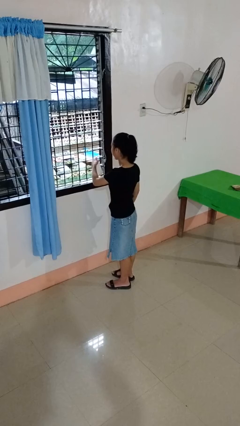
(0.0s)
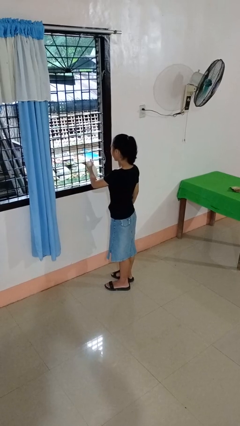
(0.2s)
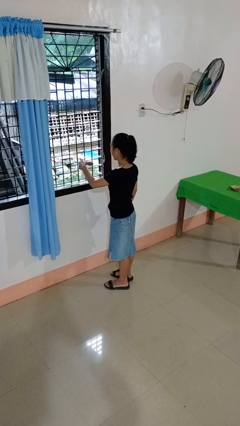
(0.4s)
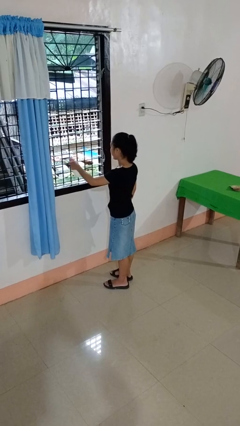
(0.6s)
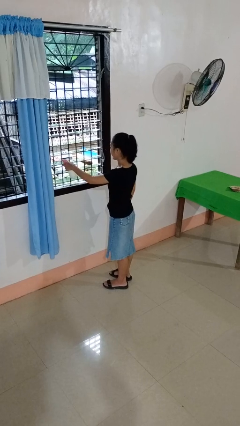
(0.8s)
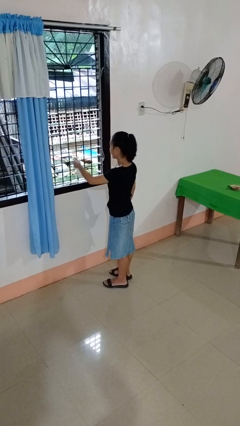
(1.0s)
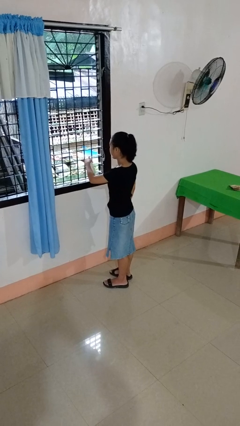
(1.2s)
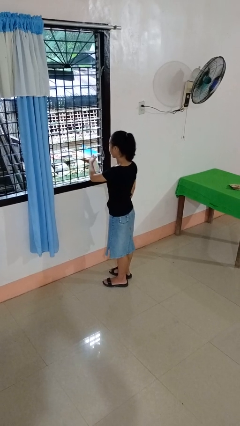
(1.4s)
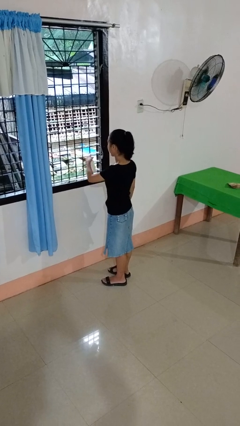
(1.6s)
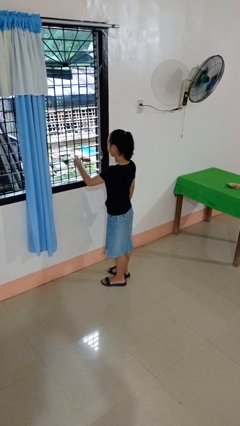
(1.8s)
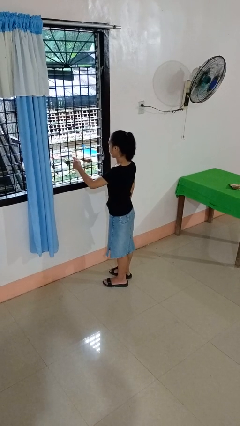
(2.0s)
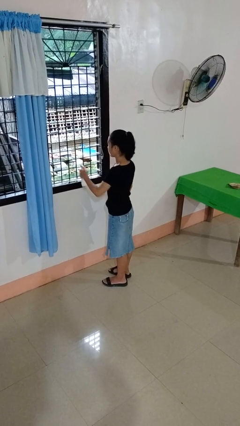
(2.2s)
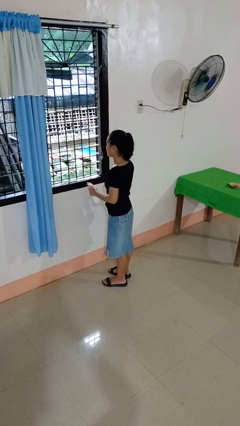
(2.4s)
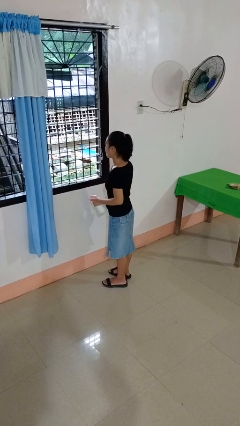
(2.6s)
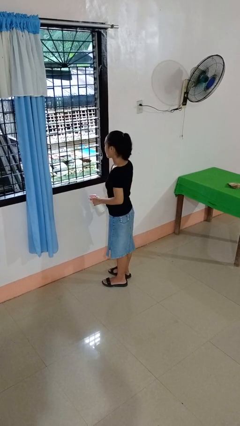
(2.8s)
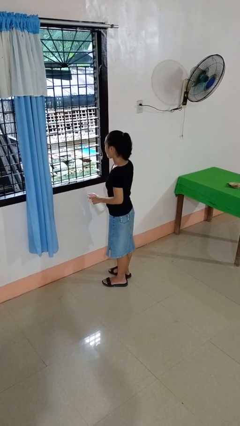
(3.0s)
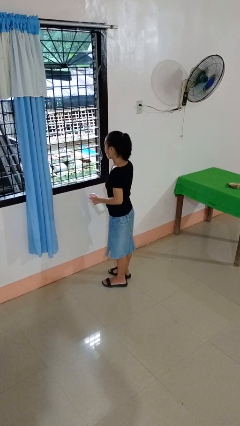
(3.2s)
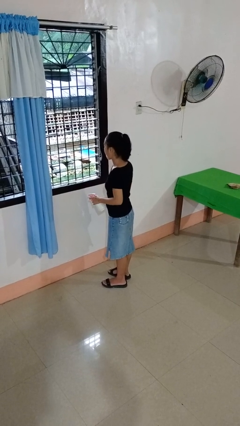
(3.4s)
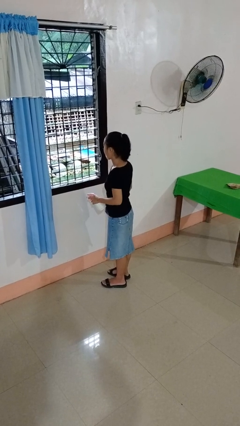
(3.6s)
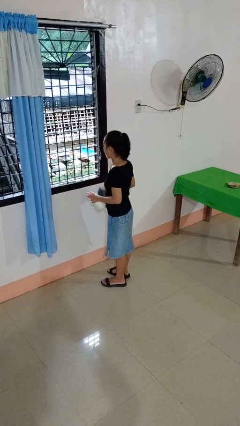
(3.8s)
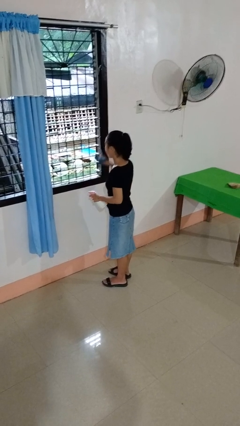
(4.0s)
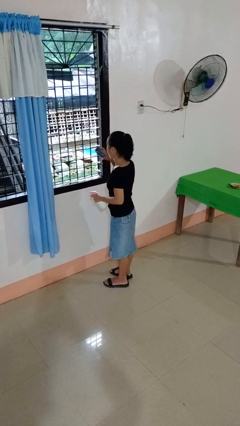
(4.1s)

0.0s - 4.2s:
person sprays from bottle

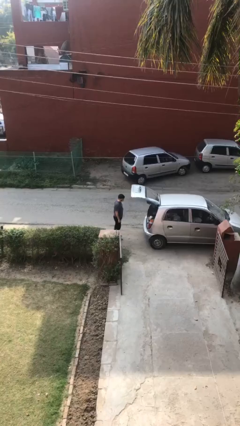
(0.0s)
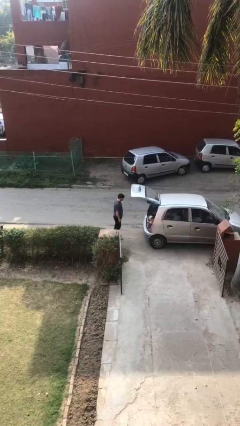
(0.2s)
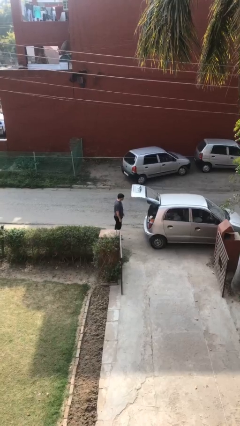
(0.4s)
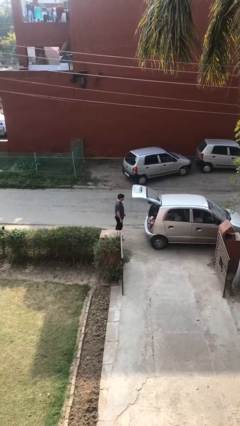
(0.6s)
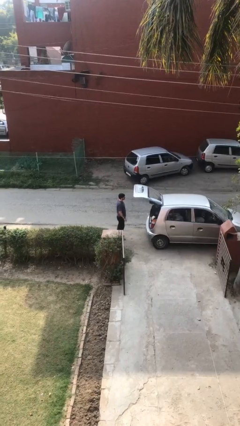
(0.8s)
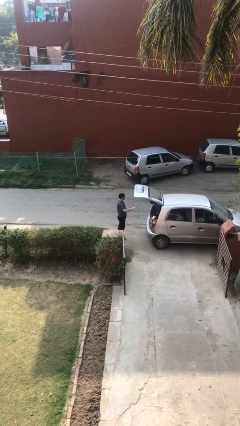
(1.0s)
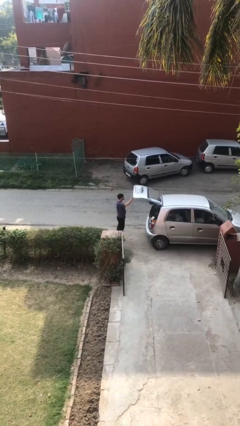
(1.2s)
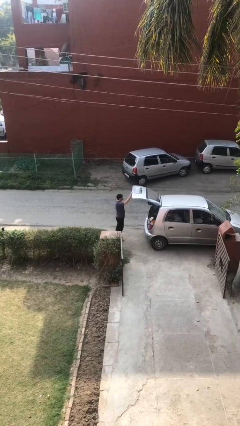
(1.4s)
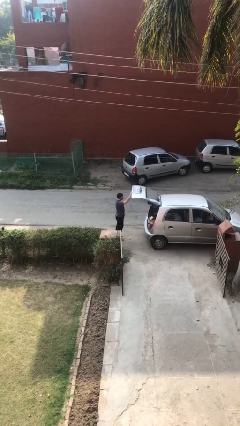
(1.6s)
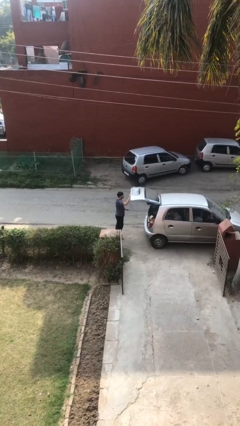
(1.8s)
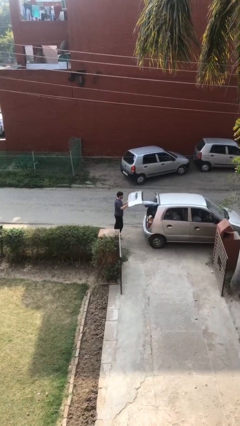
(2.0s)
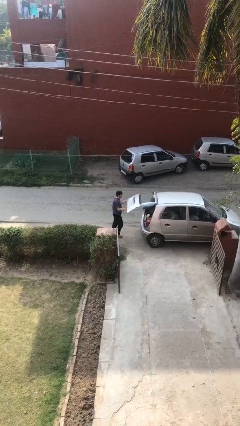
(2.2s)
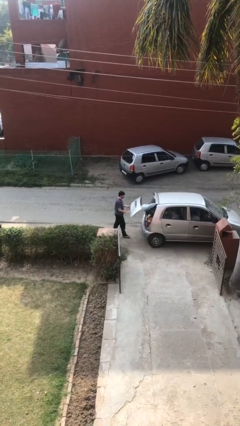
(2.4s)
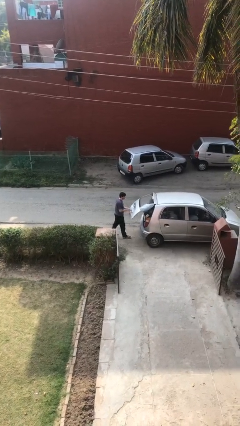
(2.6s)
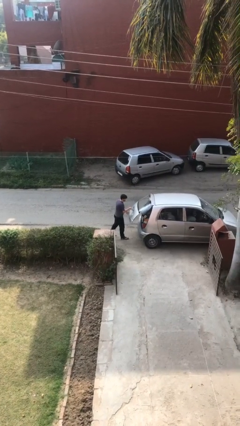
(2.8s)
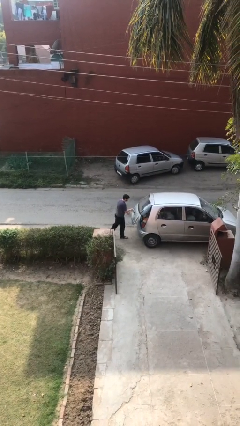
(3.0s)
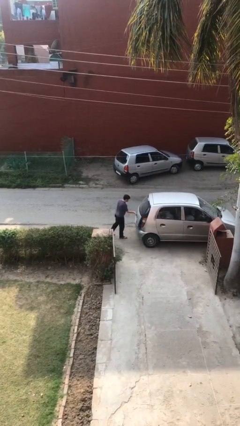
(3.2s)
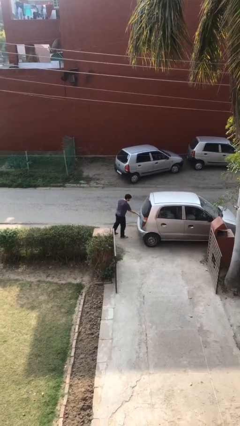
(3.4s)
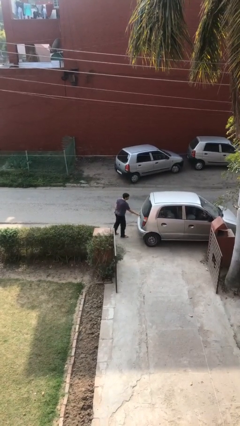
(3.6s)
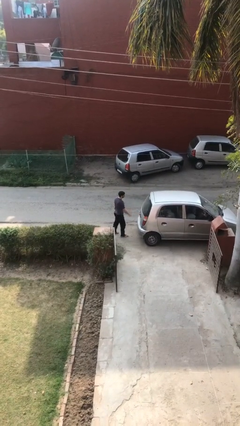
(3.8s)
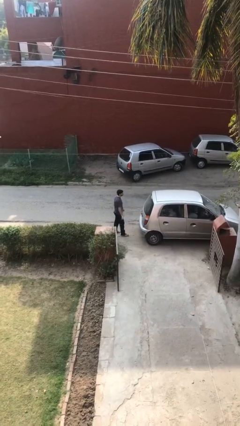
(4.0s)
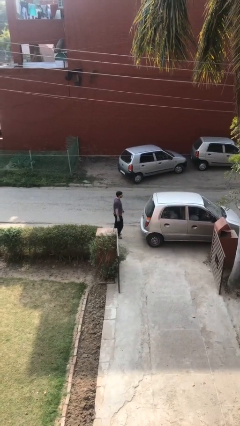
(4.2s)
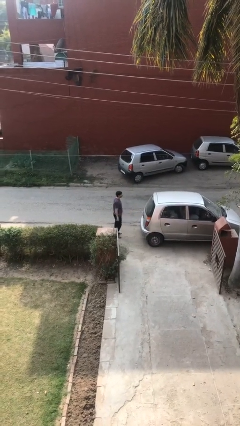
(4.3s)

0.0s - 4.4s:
person closes car trunk

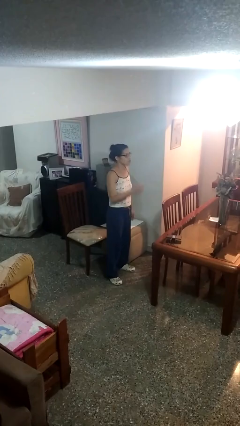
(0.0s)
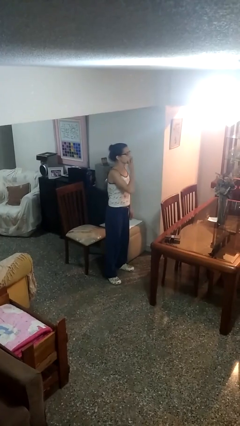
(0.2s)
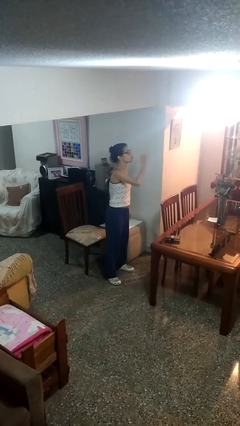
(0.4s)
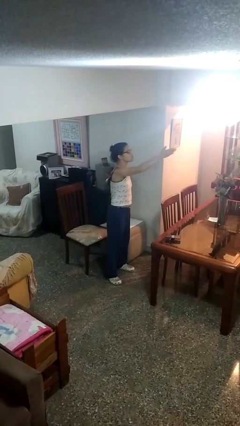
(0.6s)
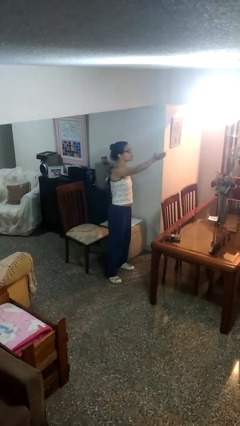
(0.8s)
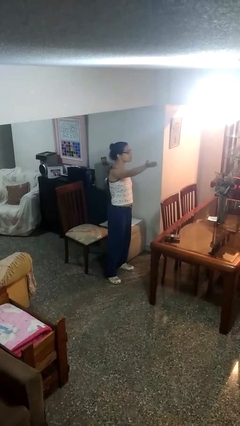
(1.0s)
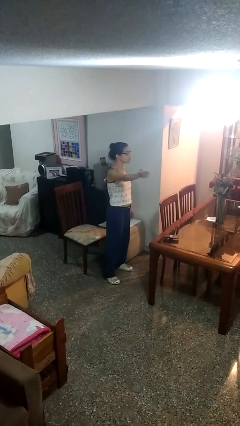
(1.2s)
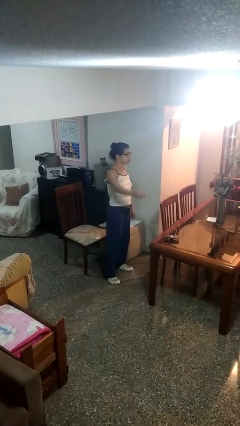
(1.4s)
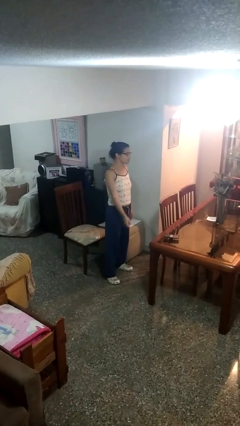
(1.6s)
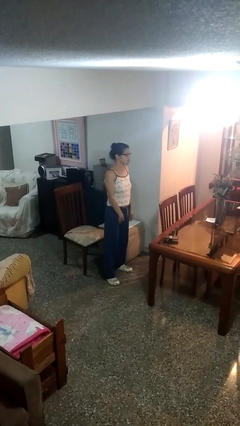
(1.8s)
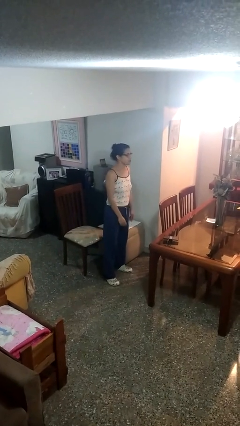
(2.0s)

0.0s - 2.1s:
person gestures blow kiss

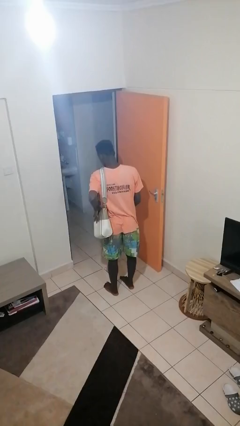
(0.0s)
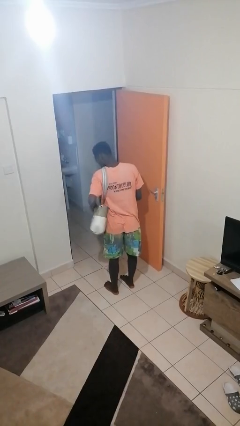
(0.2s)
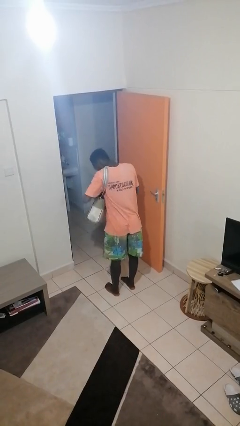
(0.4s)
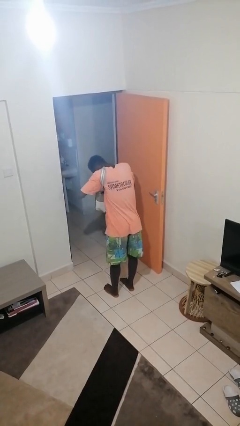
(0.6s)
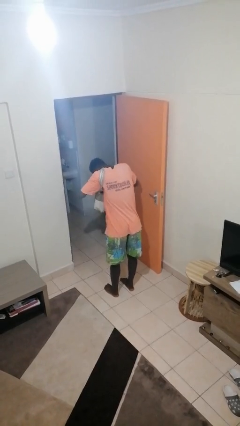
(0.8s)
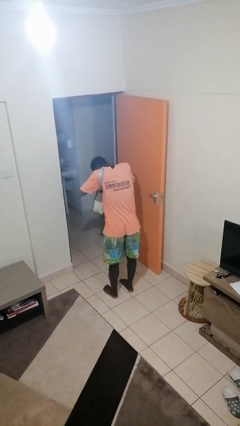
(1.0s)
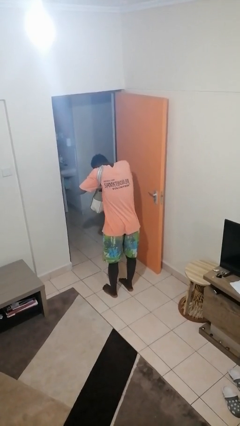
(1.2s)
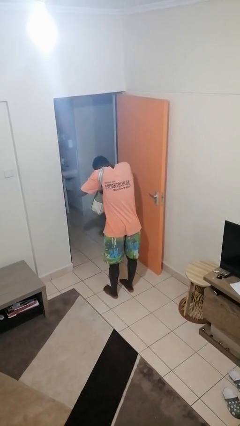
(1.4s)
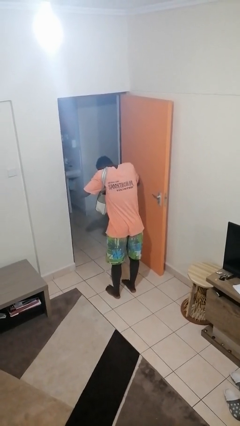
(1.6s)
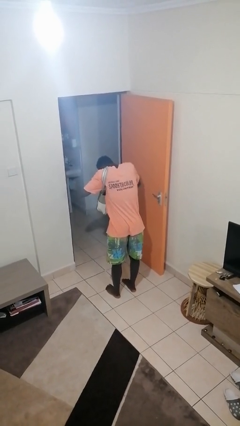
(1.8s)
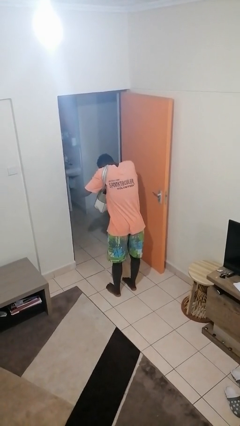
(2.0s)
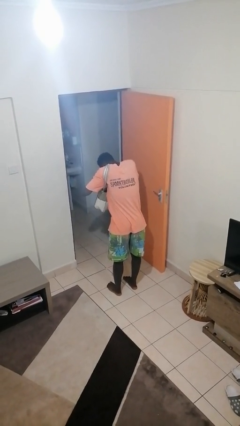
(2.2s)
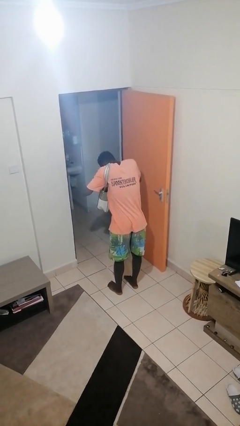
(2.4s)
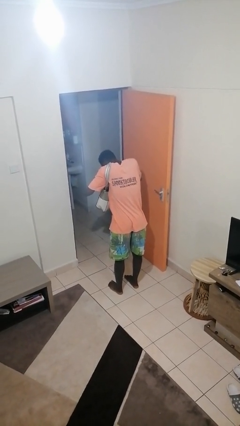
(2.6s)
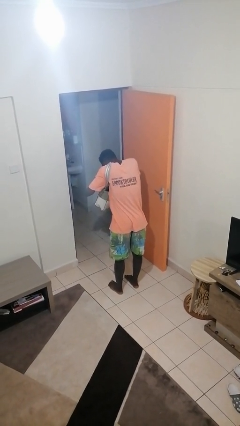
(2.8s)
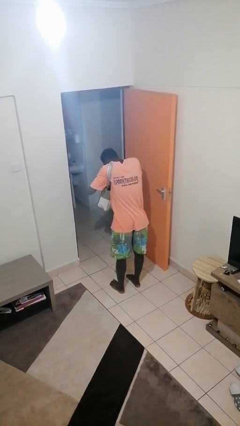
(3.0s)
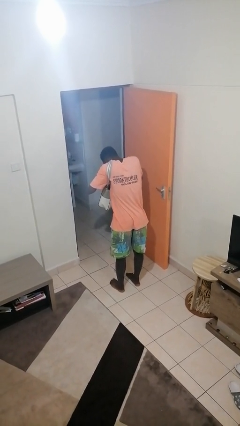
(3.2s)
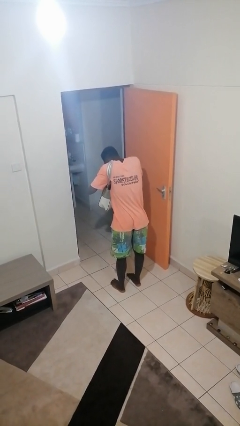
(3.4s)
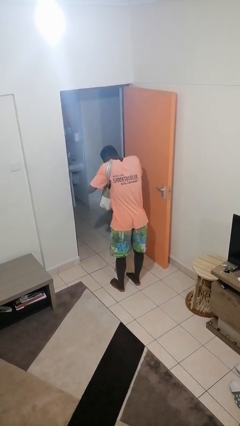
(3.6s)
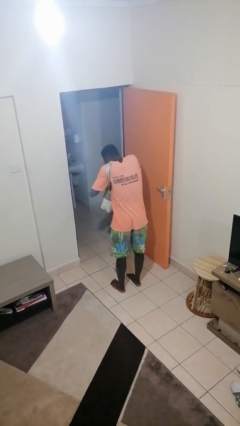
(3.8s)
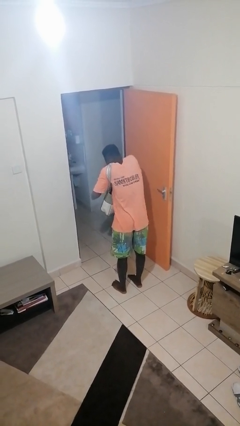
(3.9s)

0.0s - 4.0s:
person searches in purse

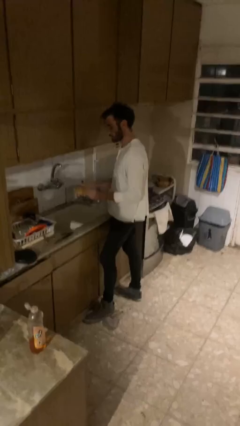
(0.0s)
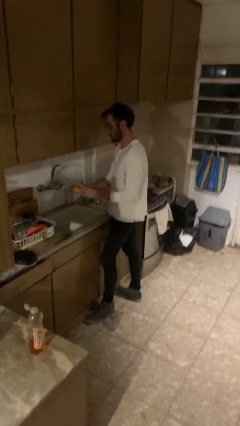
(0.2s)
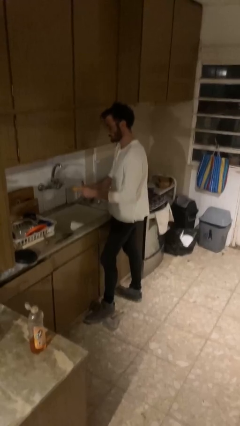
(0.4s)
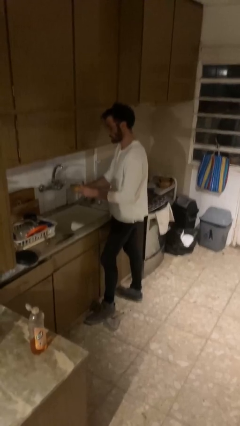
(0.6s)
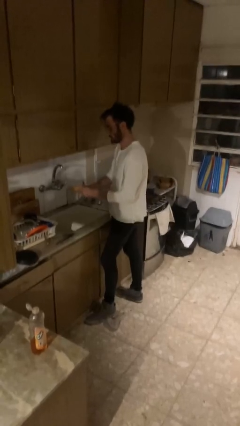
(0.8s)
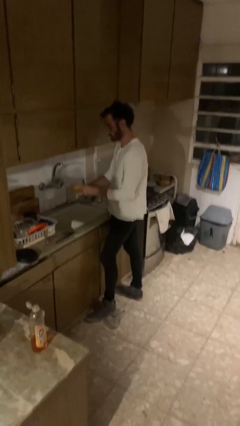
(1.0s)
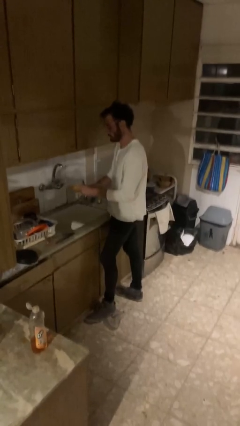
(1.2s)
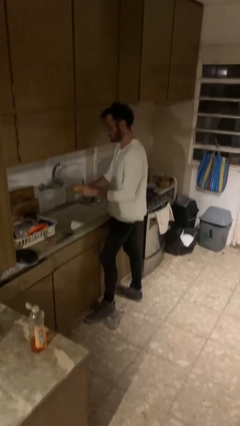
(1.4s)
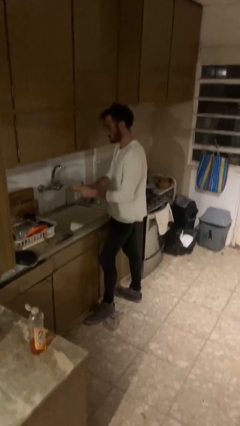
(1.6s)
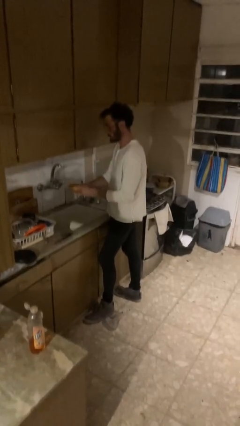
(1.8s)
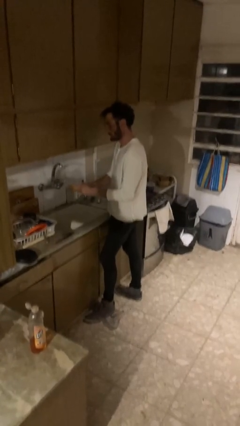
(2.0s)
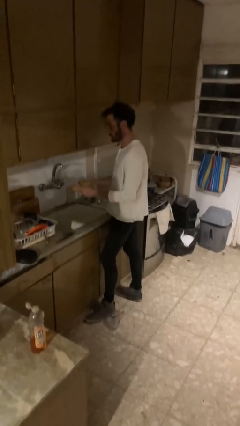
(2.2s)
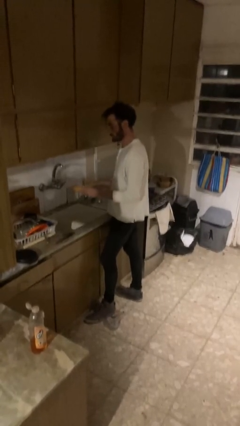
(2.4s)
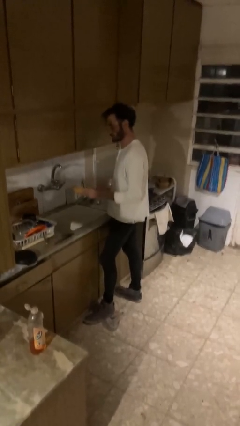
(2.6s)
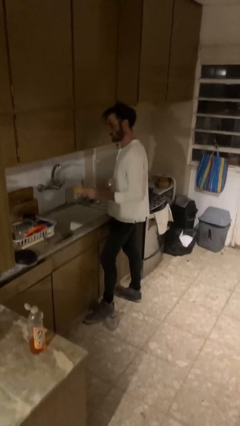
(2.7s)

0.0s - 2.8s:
person washes dish

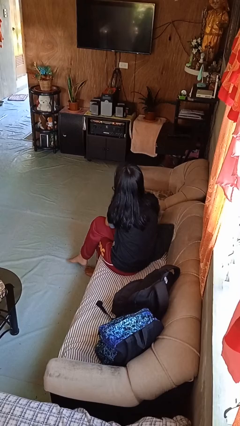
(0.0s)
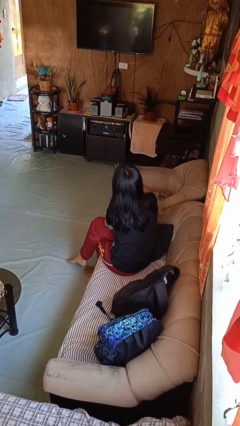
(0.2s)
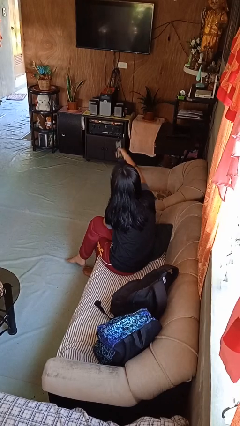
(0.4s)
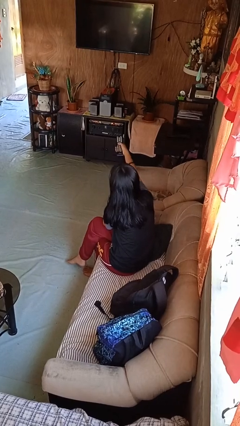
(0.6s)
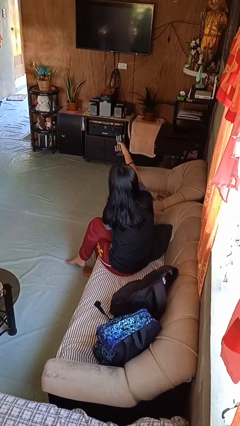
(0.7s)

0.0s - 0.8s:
person uses television remote
